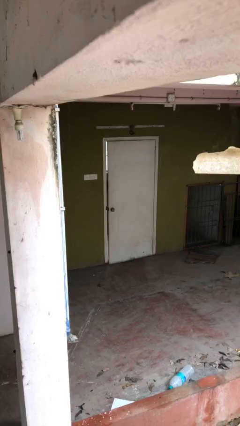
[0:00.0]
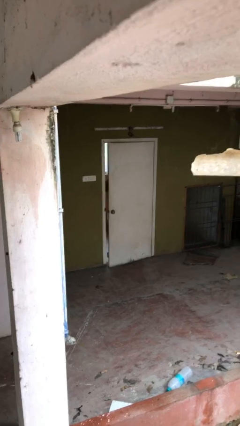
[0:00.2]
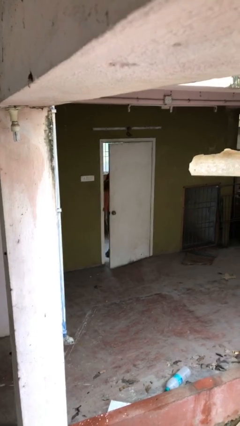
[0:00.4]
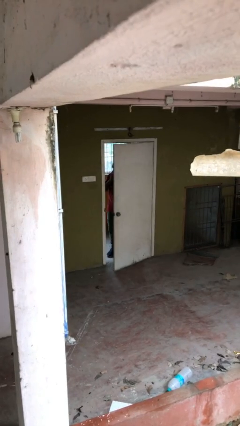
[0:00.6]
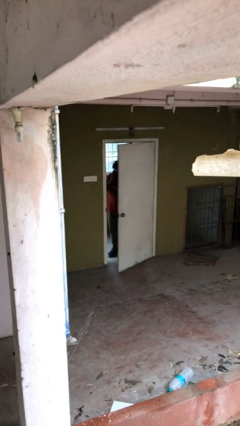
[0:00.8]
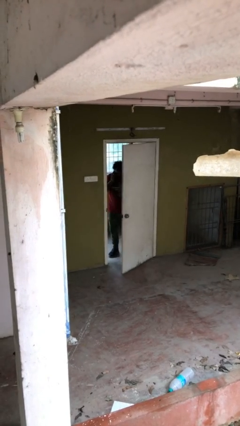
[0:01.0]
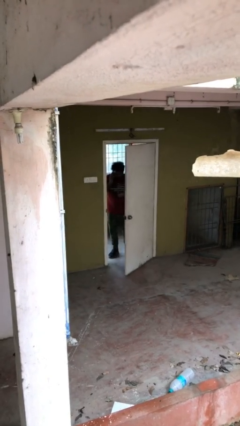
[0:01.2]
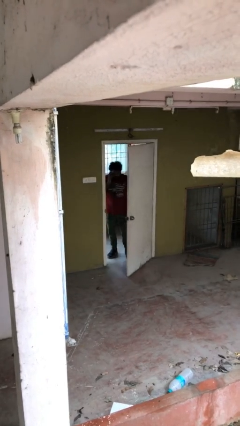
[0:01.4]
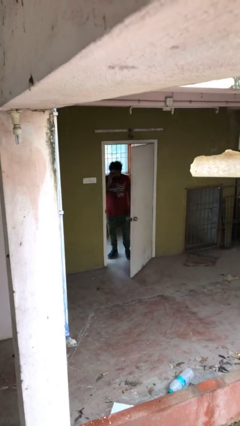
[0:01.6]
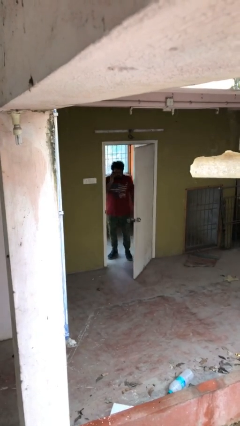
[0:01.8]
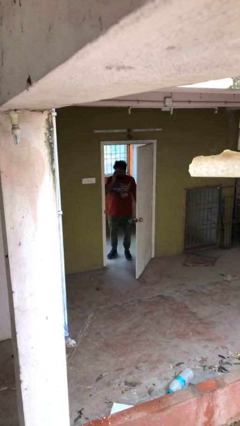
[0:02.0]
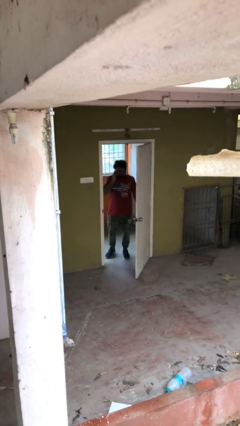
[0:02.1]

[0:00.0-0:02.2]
person opens facility door

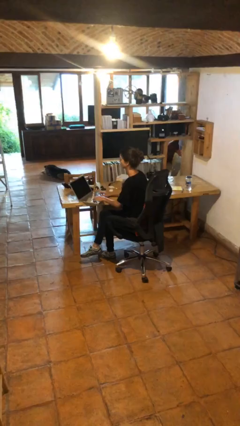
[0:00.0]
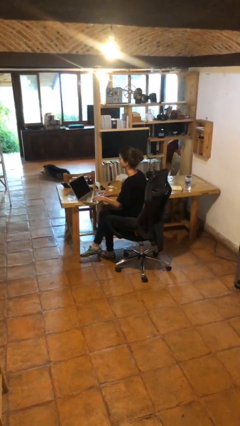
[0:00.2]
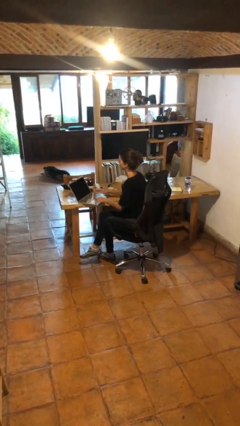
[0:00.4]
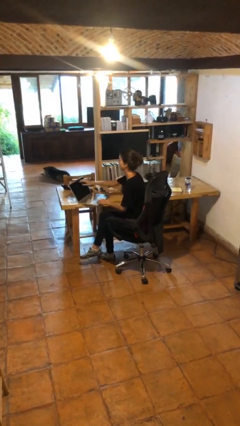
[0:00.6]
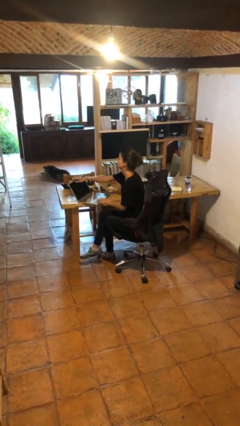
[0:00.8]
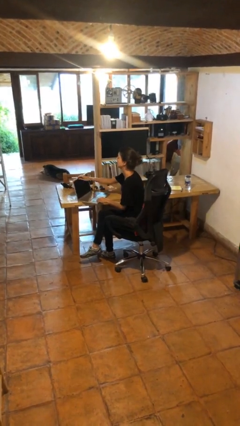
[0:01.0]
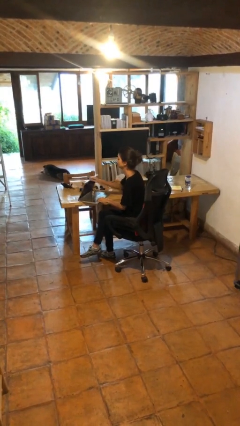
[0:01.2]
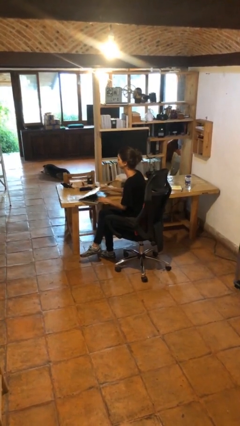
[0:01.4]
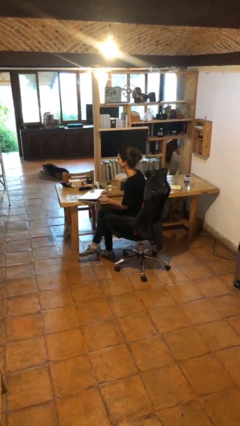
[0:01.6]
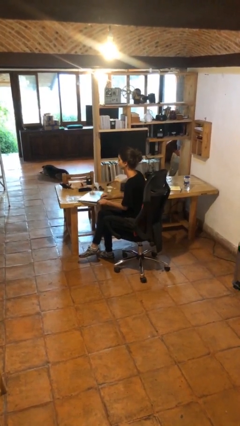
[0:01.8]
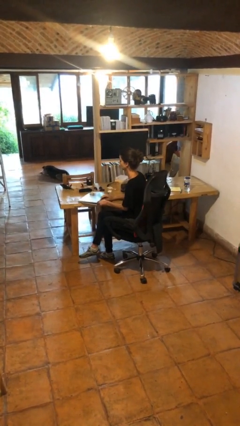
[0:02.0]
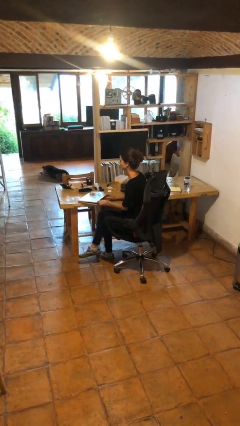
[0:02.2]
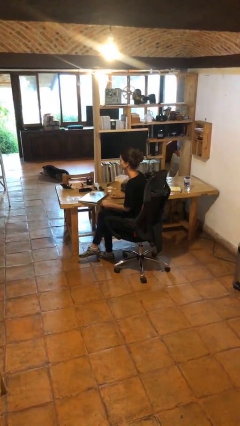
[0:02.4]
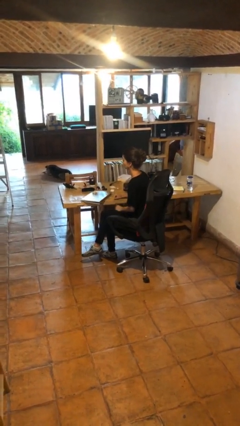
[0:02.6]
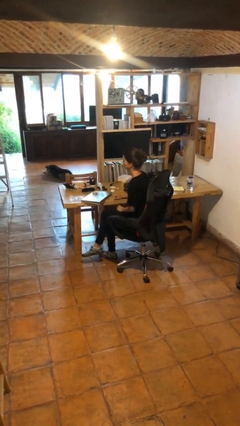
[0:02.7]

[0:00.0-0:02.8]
person closes laptop

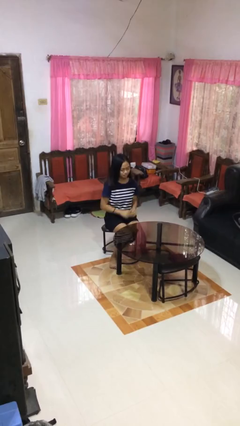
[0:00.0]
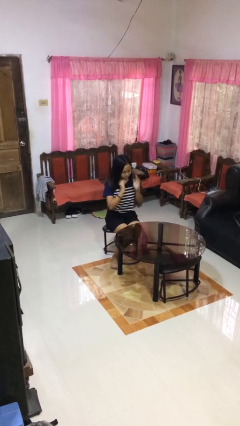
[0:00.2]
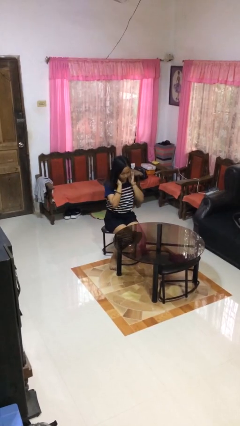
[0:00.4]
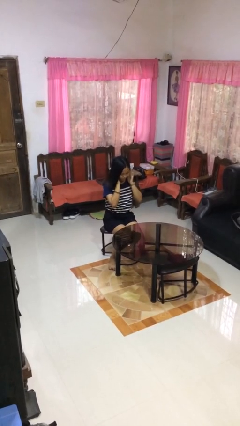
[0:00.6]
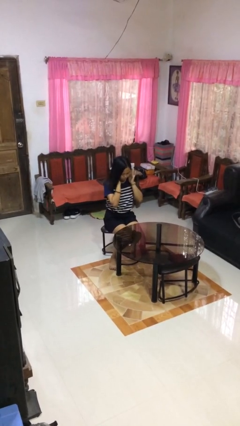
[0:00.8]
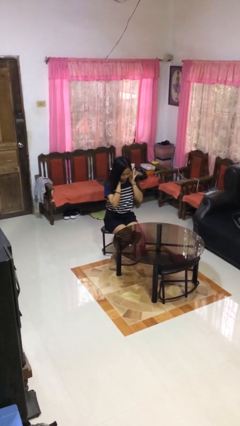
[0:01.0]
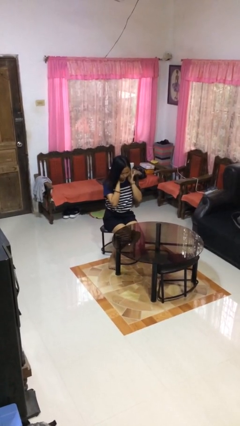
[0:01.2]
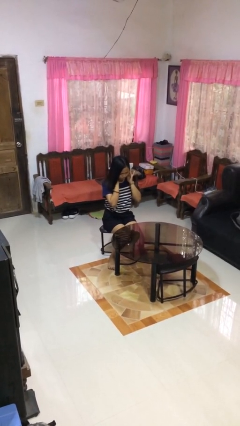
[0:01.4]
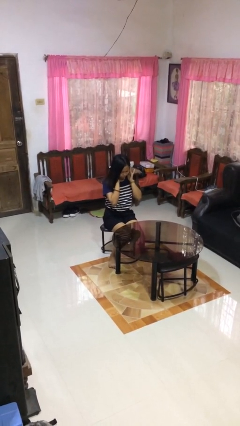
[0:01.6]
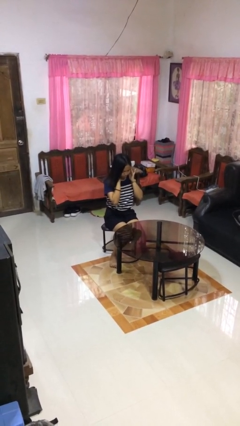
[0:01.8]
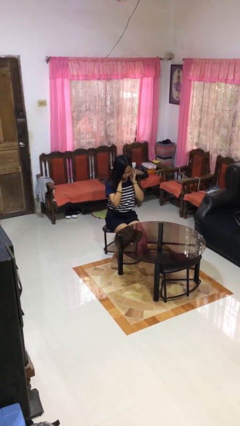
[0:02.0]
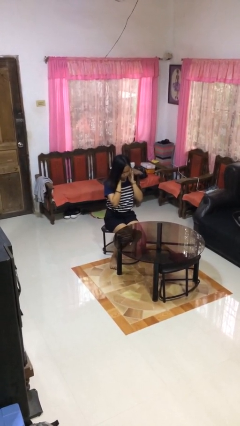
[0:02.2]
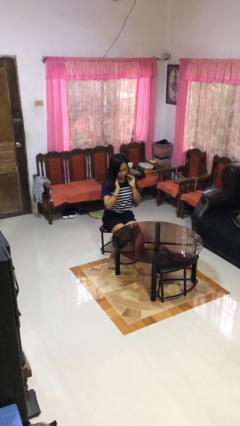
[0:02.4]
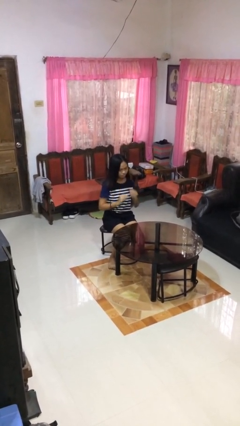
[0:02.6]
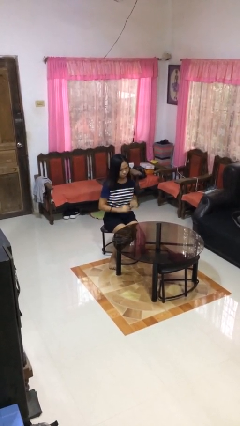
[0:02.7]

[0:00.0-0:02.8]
person puts fingers in ear

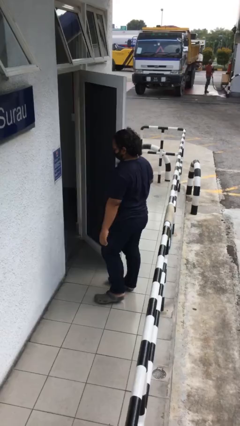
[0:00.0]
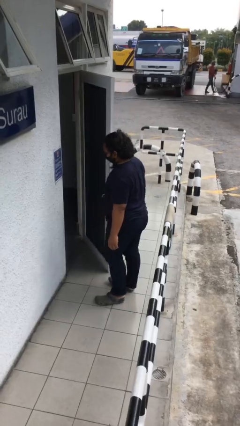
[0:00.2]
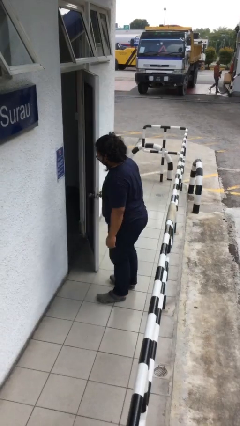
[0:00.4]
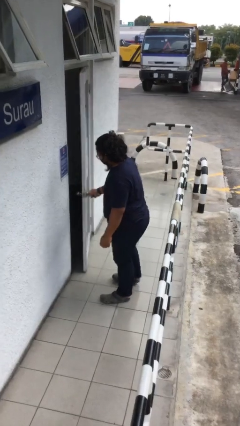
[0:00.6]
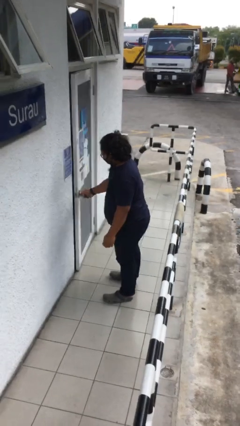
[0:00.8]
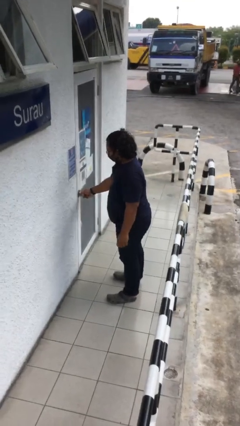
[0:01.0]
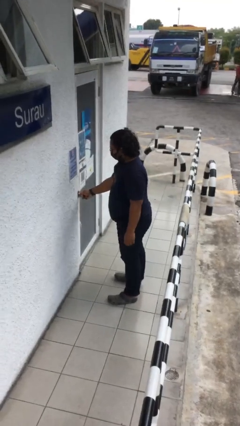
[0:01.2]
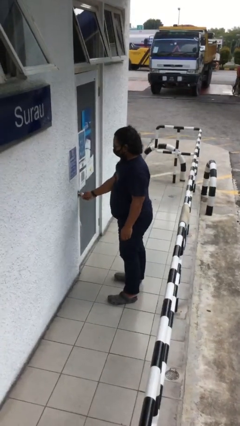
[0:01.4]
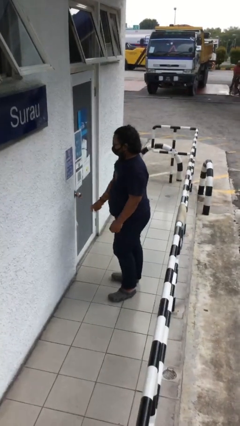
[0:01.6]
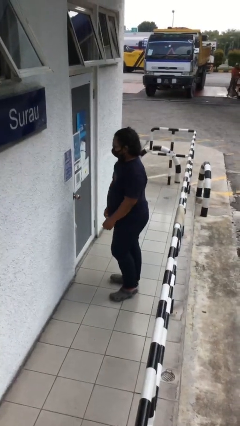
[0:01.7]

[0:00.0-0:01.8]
person closes facility door

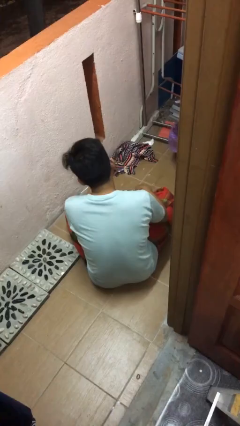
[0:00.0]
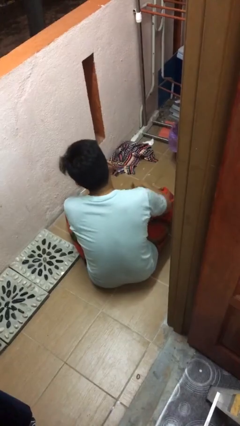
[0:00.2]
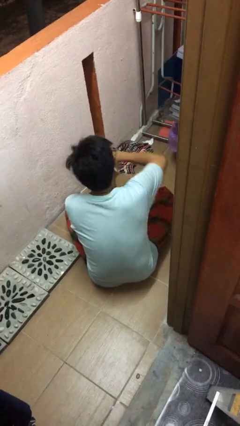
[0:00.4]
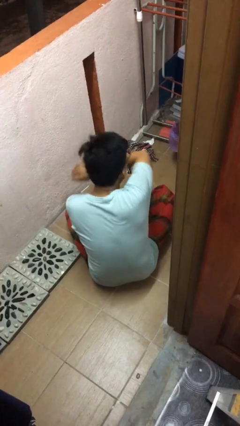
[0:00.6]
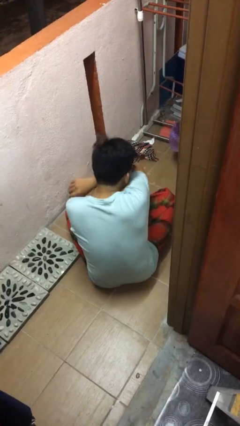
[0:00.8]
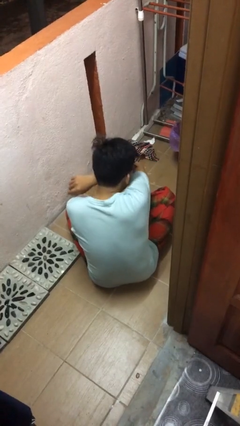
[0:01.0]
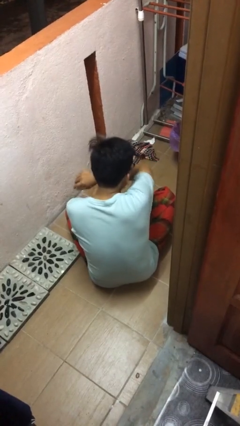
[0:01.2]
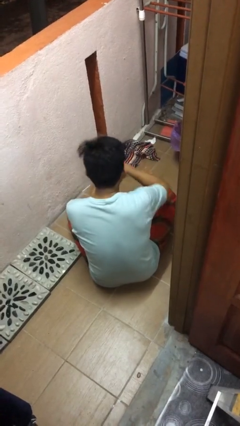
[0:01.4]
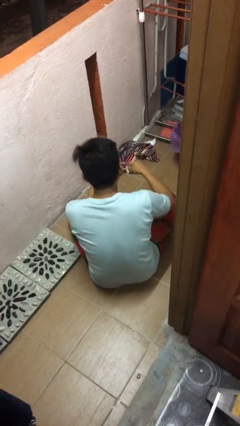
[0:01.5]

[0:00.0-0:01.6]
person sneezes into arm

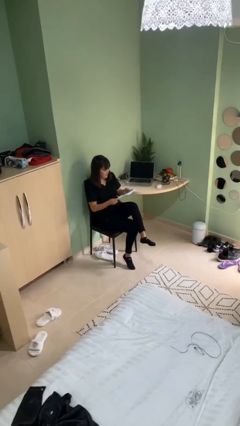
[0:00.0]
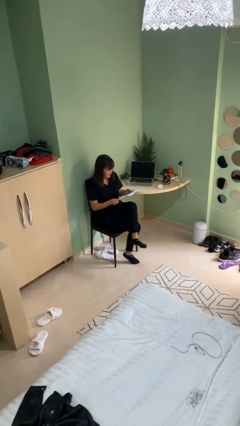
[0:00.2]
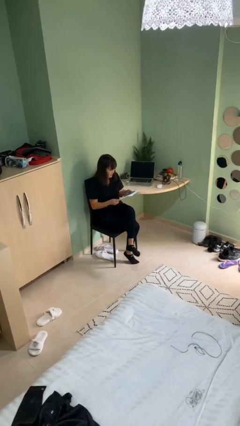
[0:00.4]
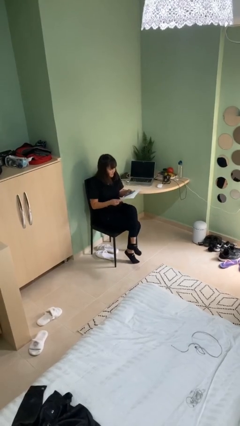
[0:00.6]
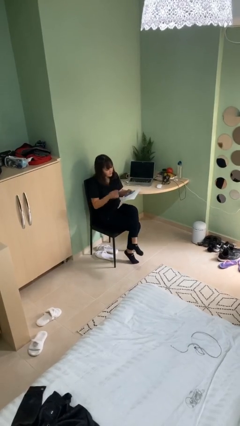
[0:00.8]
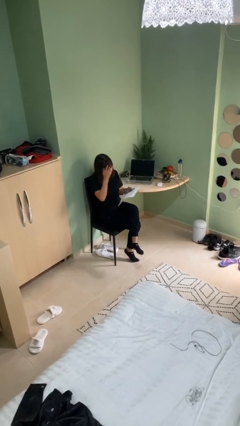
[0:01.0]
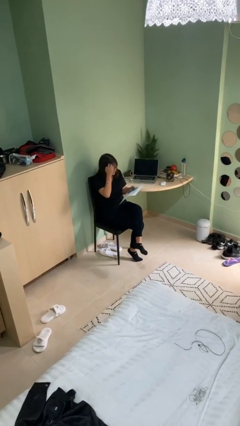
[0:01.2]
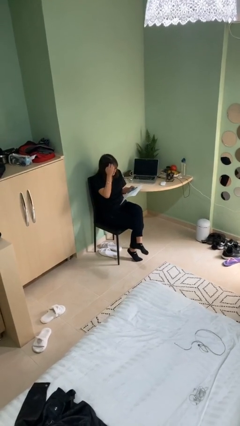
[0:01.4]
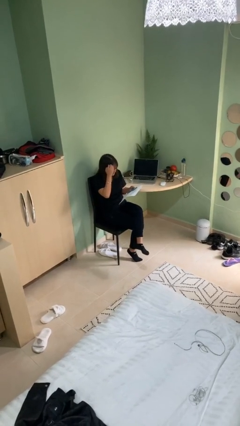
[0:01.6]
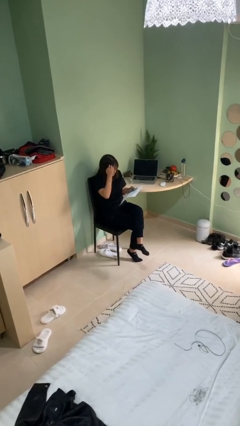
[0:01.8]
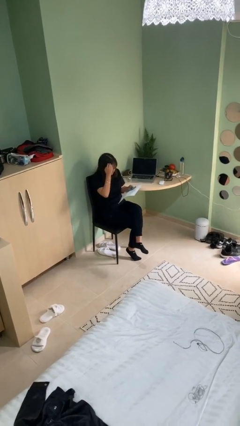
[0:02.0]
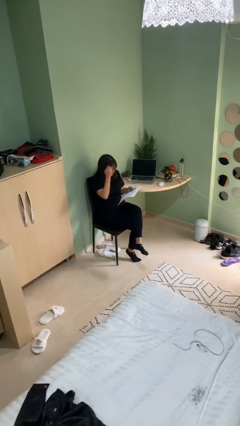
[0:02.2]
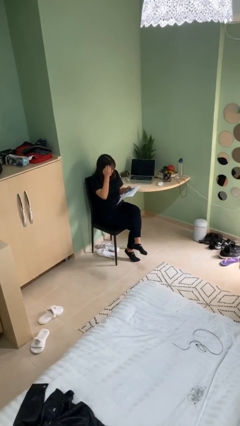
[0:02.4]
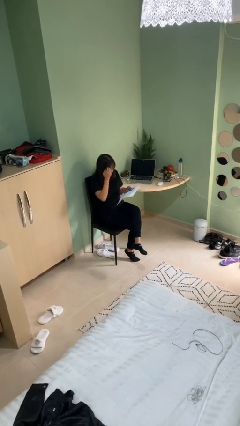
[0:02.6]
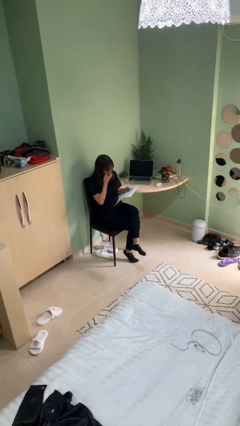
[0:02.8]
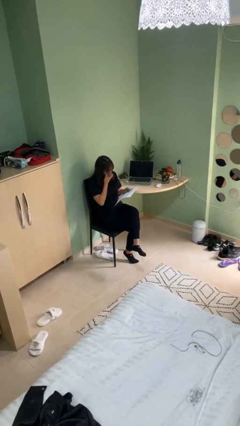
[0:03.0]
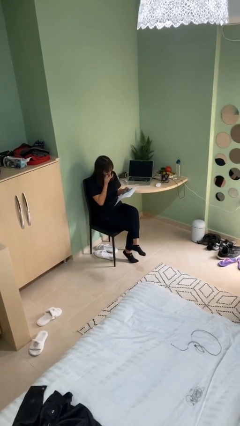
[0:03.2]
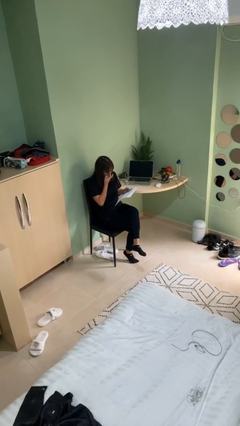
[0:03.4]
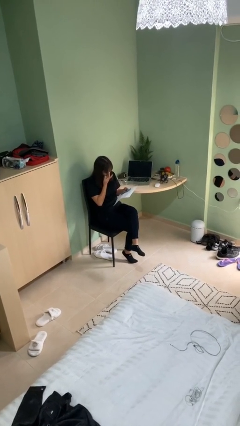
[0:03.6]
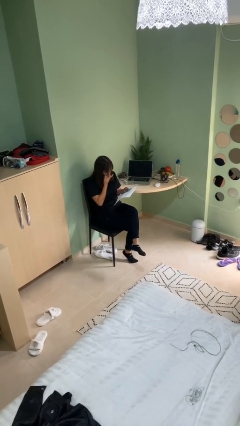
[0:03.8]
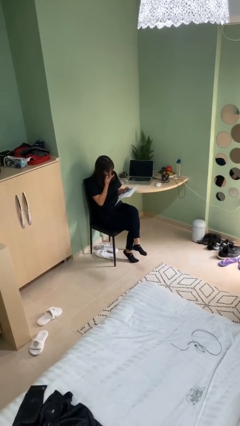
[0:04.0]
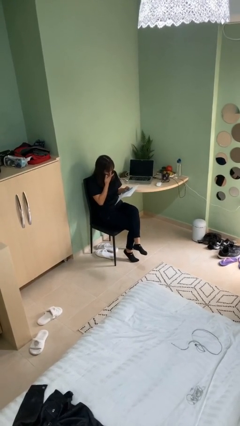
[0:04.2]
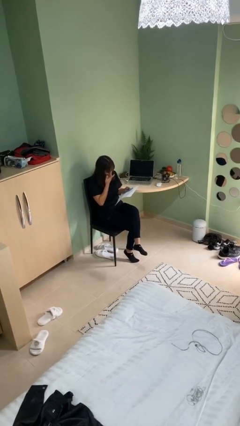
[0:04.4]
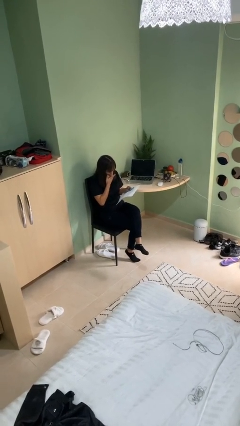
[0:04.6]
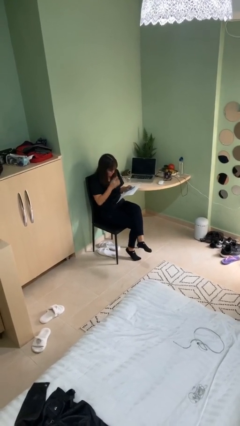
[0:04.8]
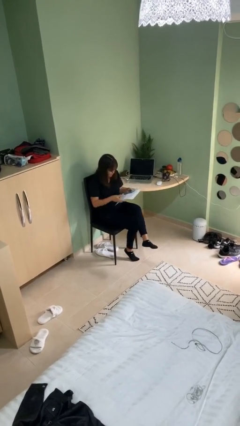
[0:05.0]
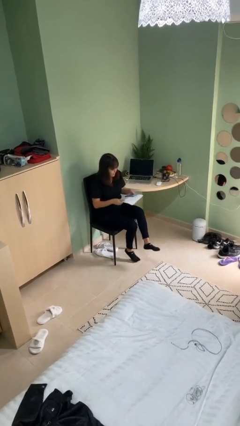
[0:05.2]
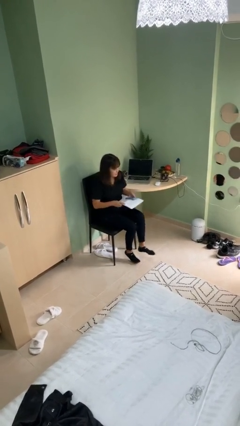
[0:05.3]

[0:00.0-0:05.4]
person reads document

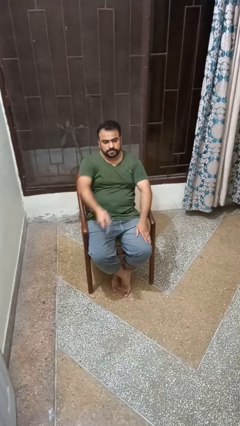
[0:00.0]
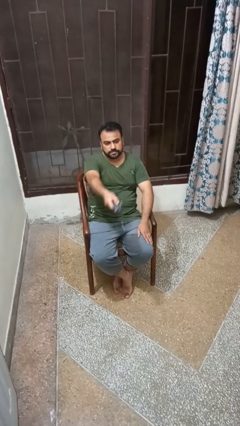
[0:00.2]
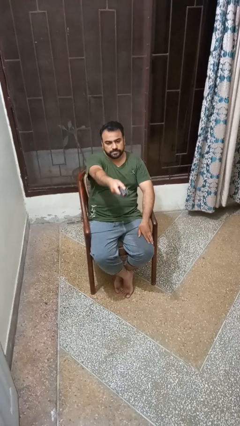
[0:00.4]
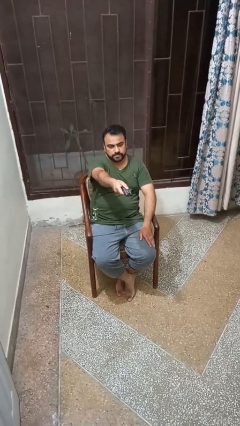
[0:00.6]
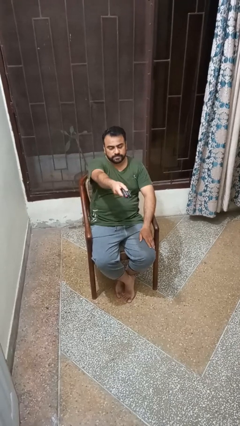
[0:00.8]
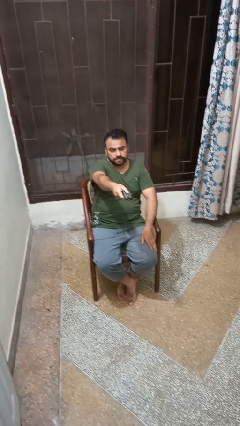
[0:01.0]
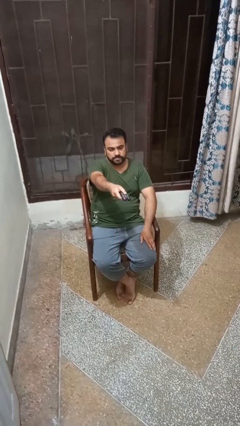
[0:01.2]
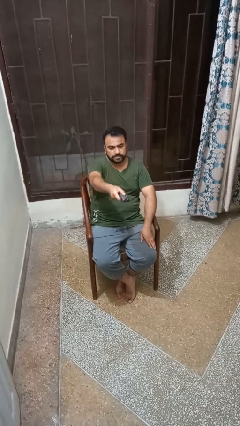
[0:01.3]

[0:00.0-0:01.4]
person uses television remote
